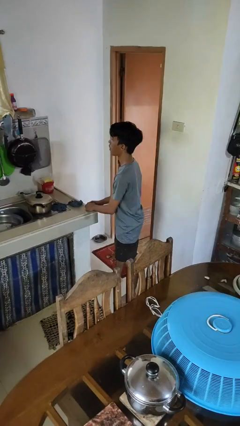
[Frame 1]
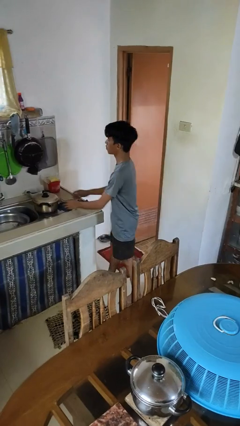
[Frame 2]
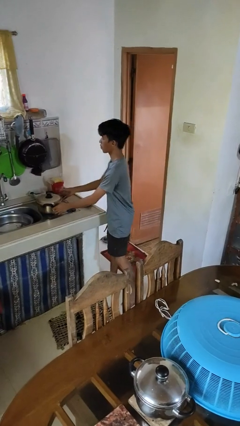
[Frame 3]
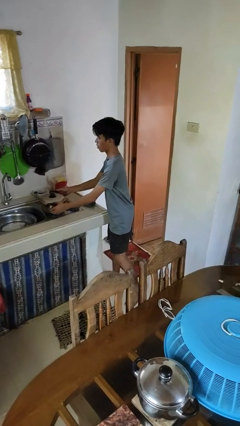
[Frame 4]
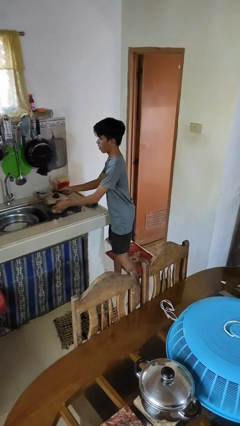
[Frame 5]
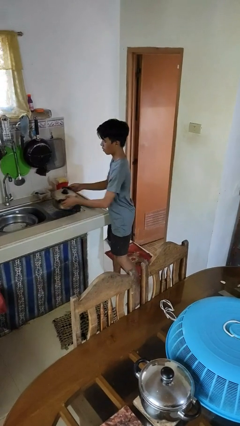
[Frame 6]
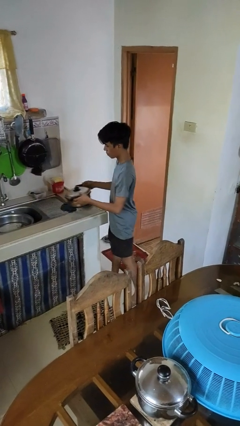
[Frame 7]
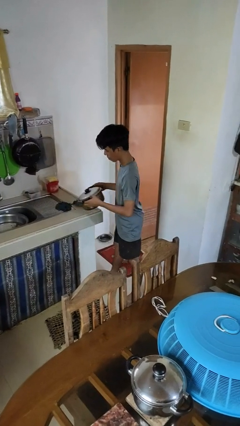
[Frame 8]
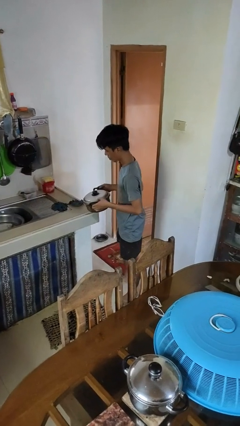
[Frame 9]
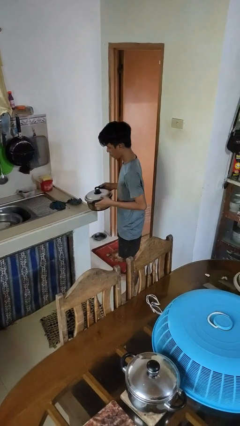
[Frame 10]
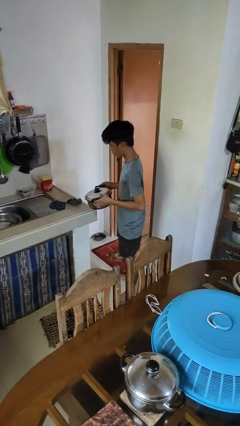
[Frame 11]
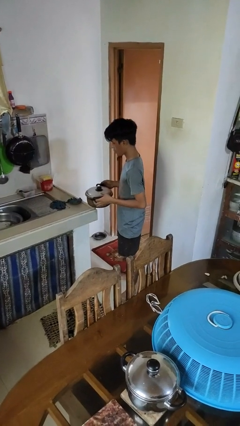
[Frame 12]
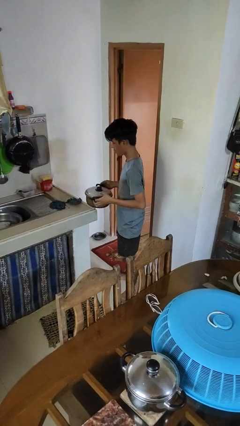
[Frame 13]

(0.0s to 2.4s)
person picks up object from countertop

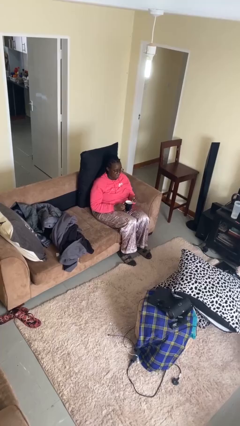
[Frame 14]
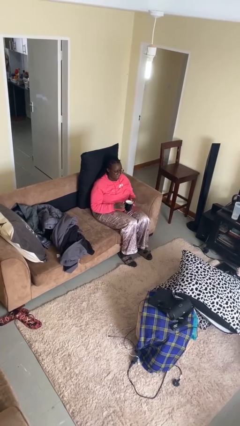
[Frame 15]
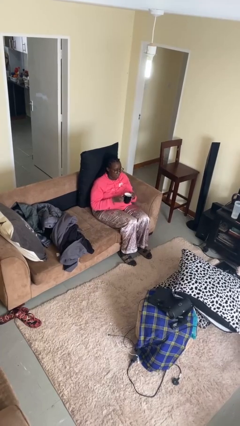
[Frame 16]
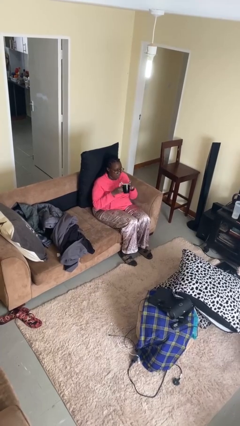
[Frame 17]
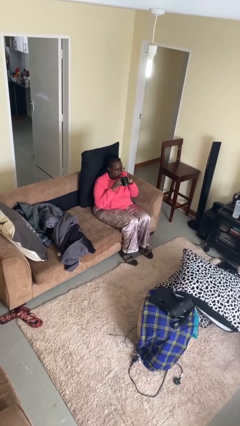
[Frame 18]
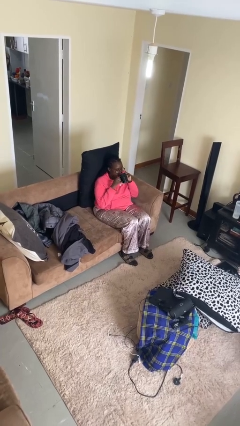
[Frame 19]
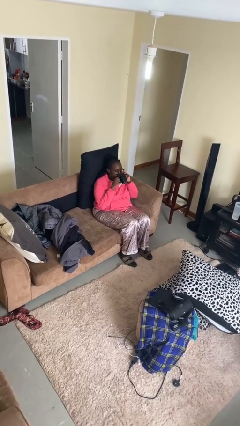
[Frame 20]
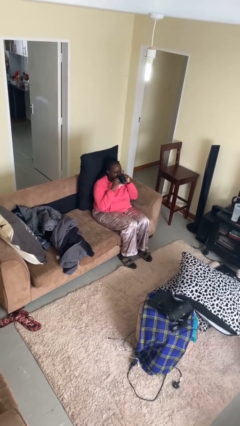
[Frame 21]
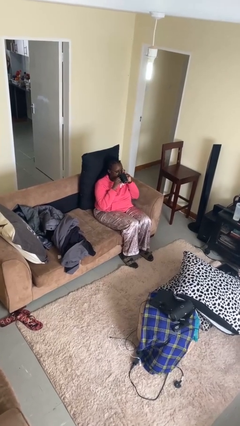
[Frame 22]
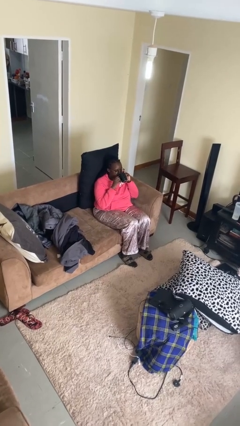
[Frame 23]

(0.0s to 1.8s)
person drinks from mug

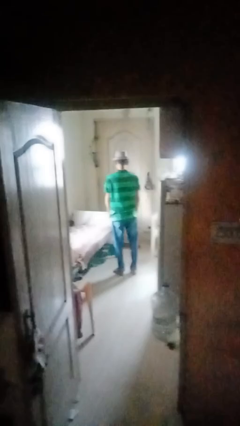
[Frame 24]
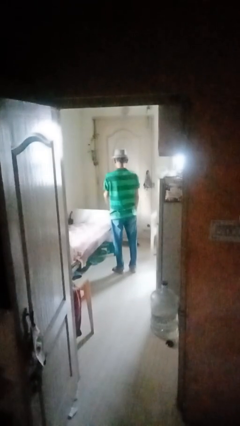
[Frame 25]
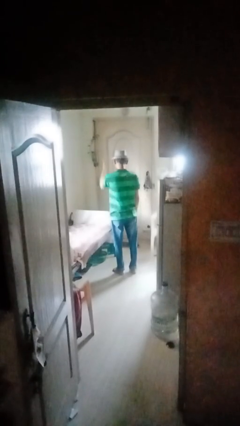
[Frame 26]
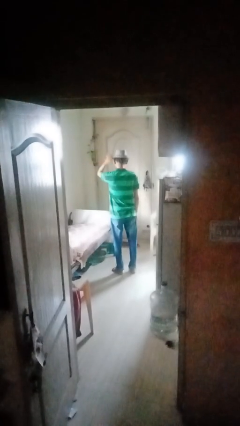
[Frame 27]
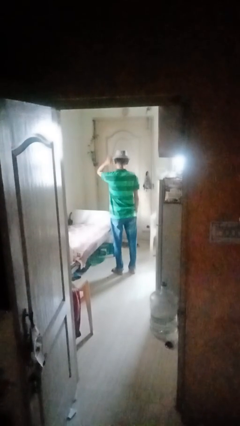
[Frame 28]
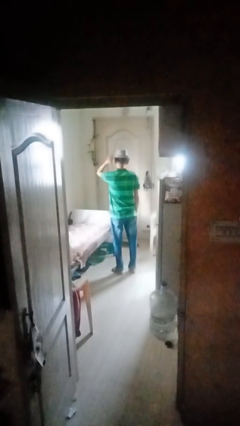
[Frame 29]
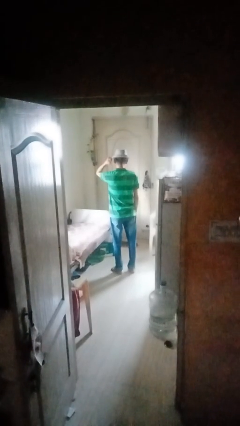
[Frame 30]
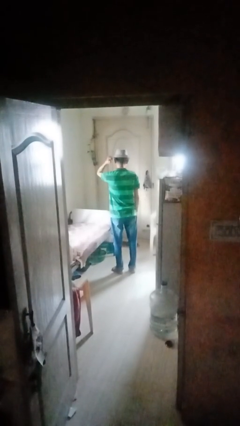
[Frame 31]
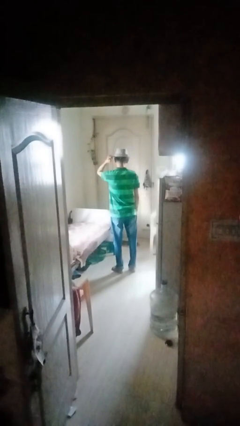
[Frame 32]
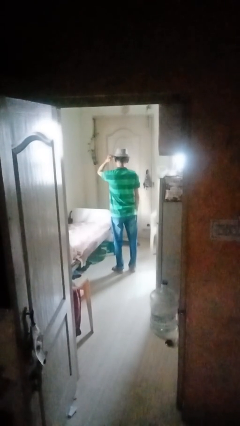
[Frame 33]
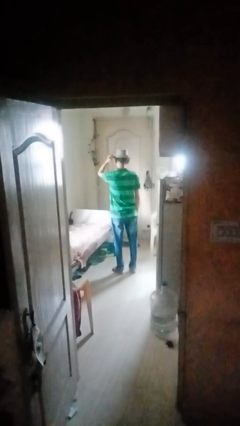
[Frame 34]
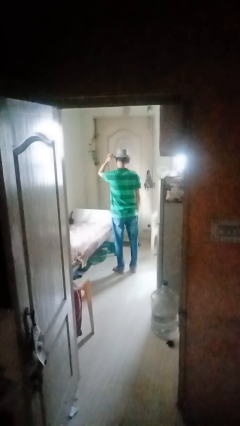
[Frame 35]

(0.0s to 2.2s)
person gestures behind me

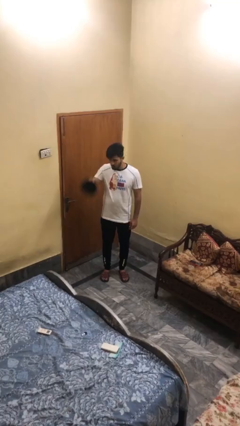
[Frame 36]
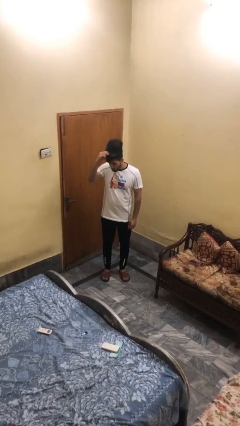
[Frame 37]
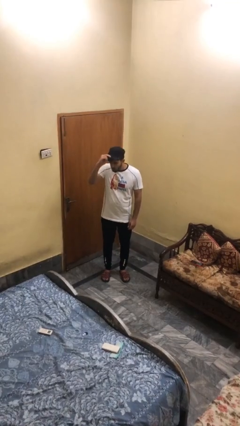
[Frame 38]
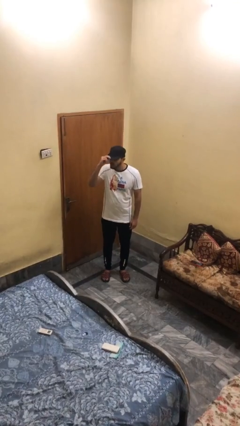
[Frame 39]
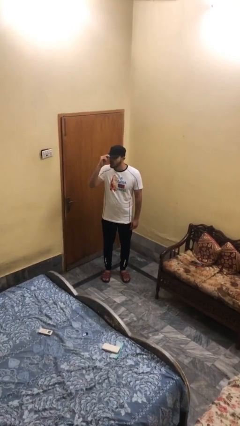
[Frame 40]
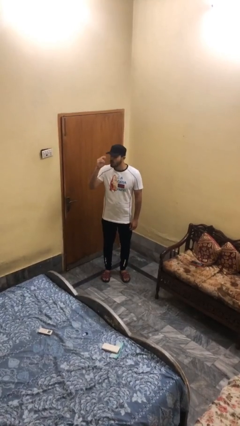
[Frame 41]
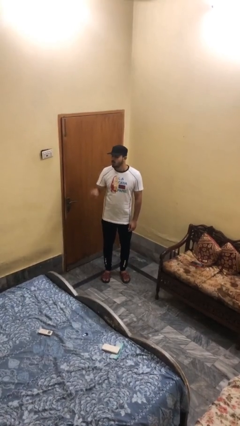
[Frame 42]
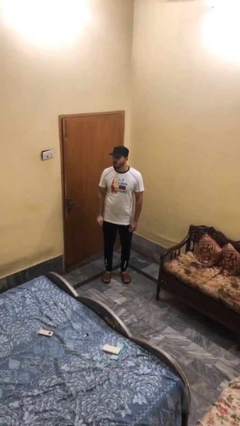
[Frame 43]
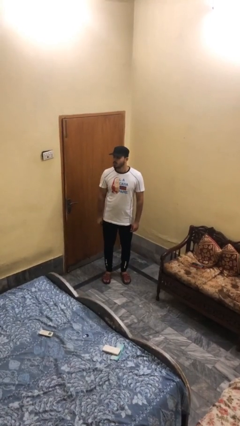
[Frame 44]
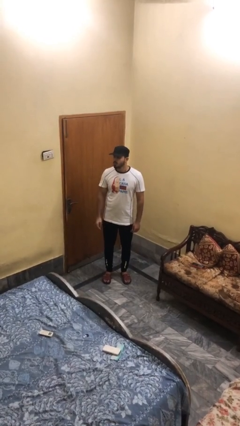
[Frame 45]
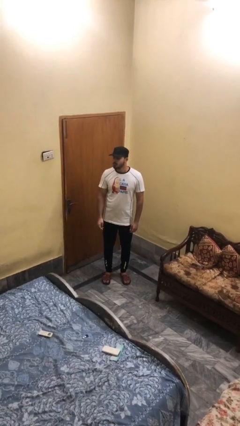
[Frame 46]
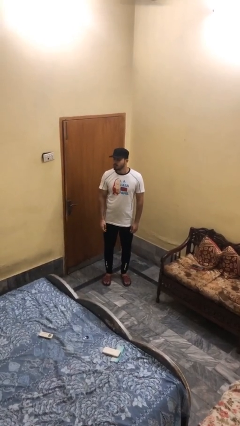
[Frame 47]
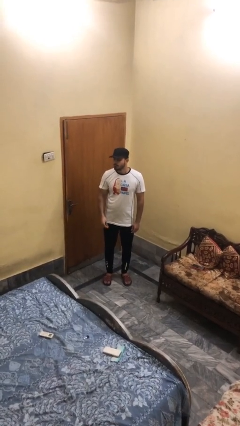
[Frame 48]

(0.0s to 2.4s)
person puts on hat

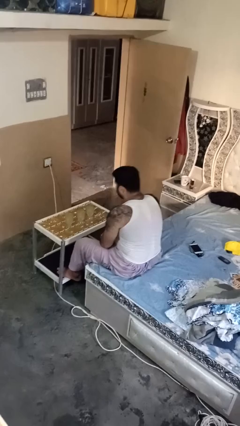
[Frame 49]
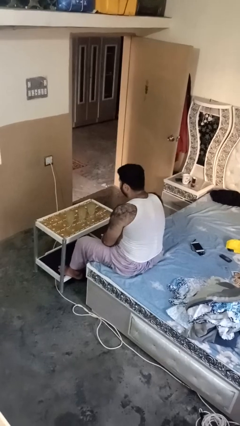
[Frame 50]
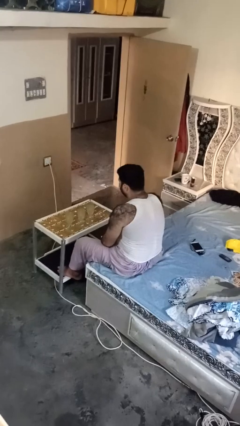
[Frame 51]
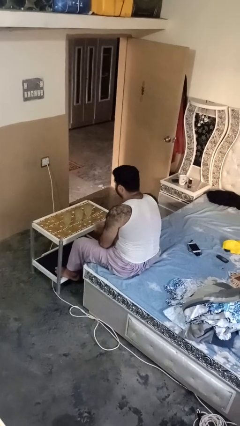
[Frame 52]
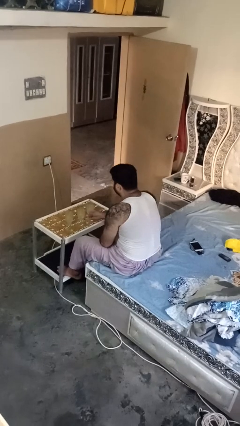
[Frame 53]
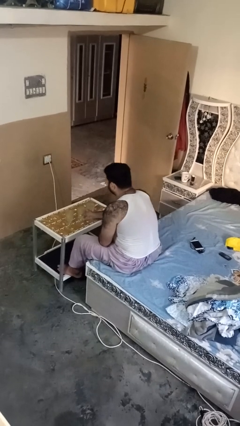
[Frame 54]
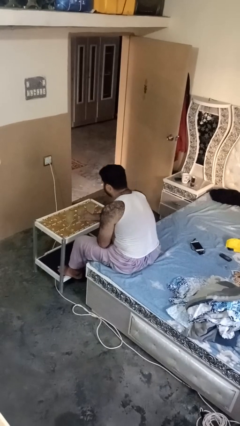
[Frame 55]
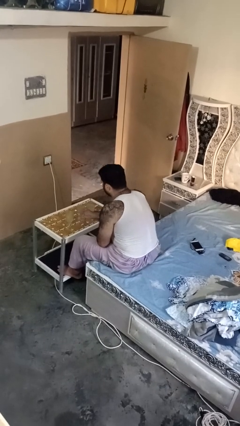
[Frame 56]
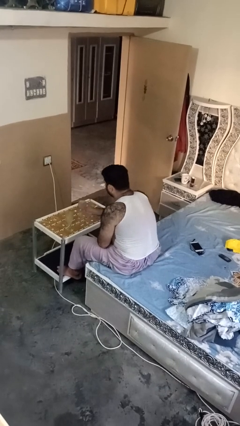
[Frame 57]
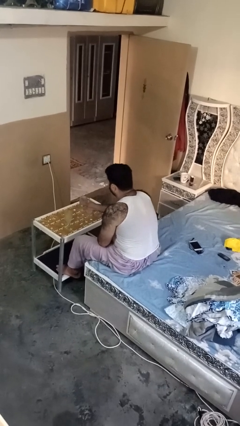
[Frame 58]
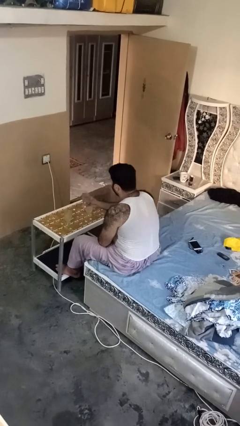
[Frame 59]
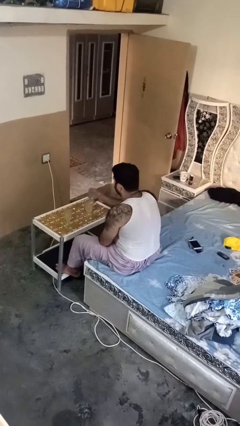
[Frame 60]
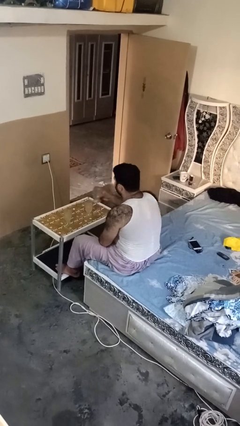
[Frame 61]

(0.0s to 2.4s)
person picks up object from table

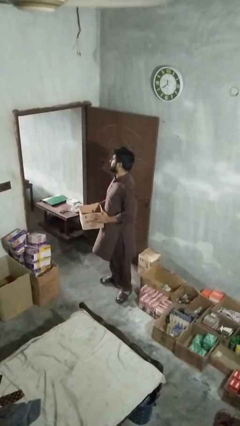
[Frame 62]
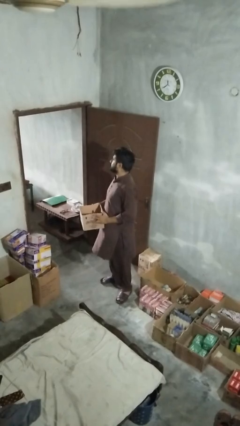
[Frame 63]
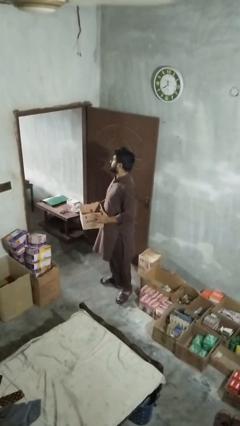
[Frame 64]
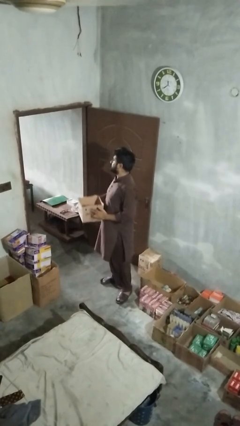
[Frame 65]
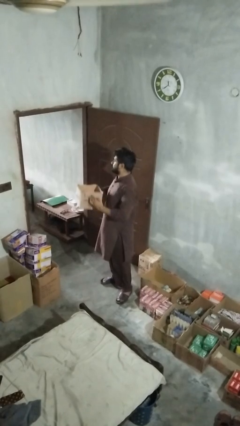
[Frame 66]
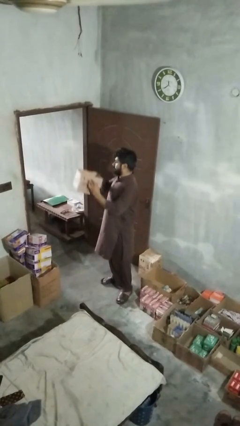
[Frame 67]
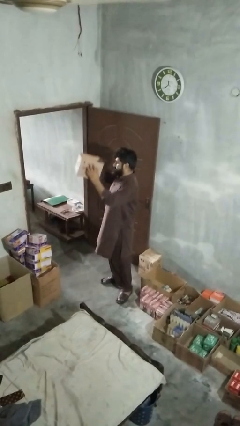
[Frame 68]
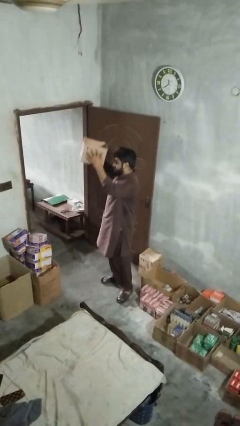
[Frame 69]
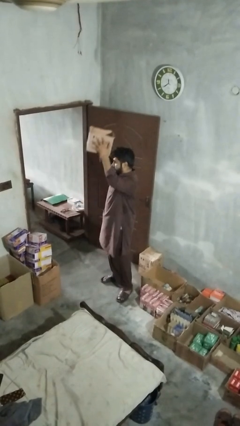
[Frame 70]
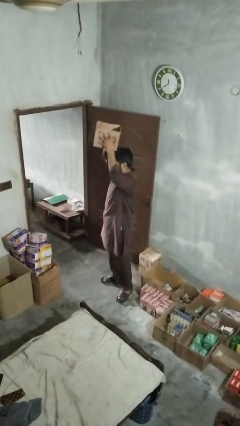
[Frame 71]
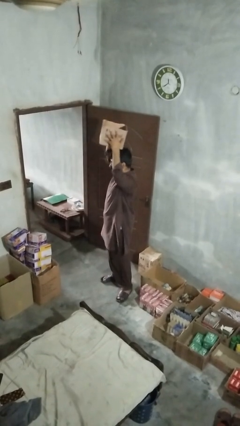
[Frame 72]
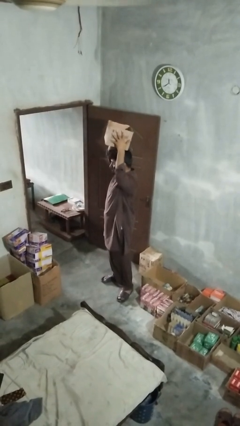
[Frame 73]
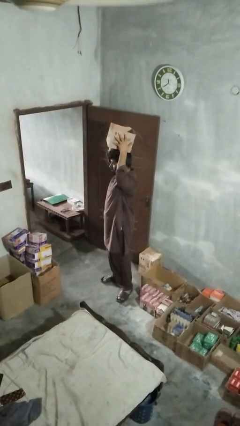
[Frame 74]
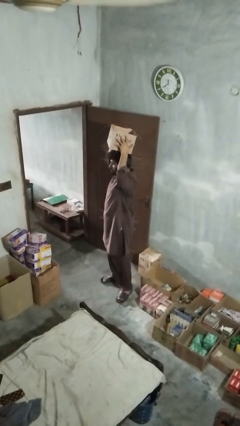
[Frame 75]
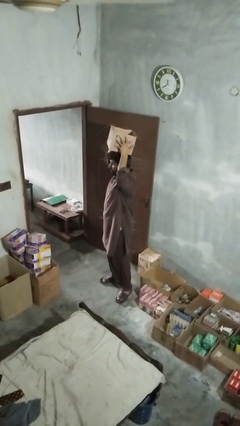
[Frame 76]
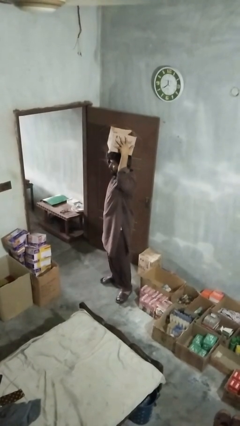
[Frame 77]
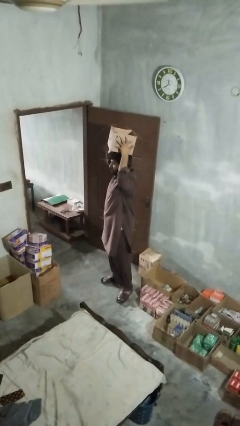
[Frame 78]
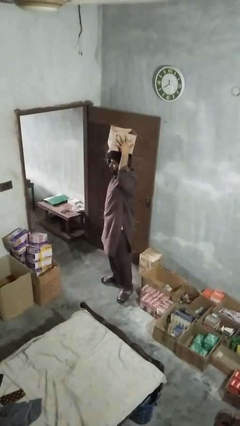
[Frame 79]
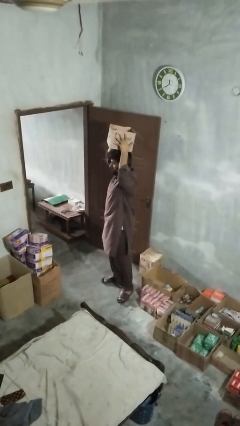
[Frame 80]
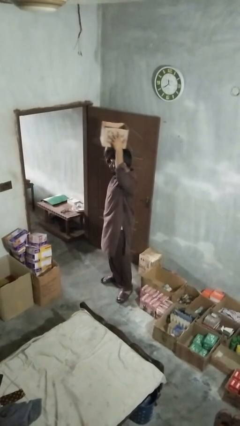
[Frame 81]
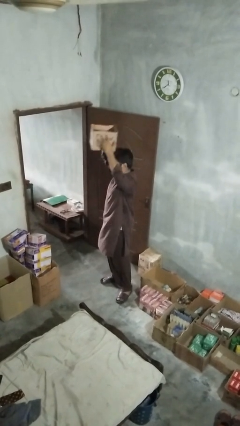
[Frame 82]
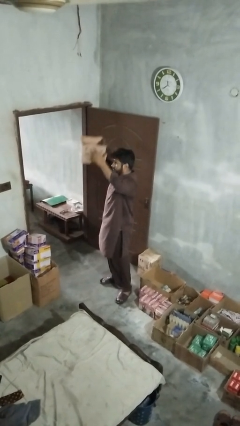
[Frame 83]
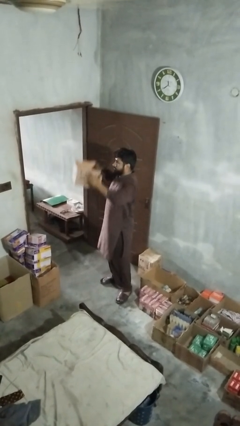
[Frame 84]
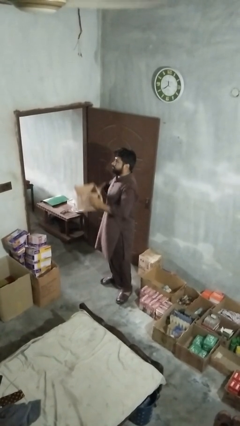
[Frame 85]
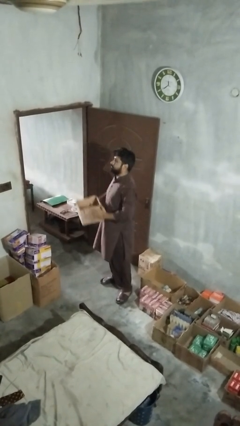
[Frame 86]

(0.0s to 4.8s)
person holds object above head

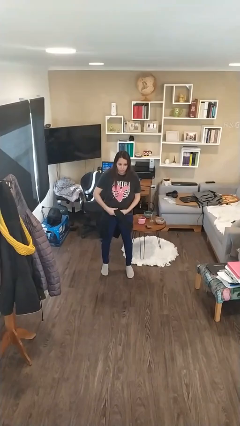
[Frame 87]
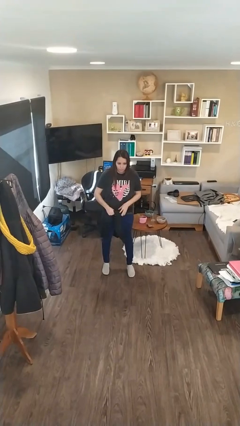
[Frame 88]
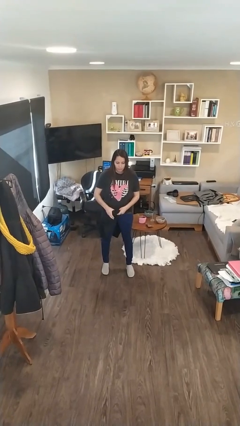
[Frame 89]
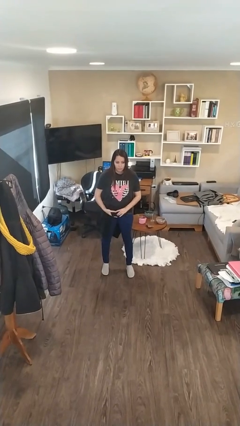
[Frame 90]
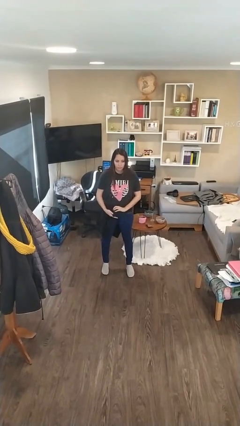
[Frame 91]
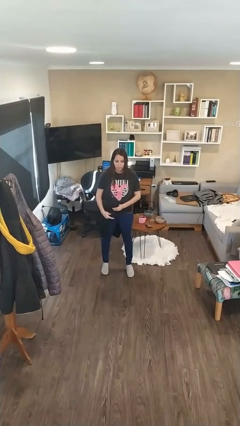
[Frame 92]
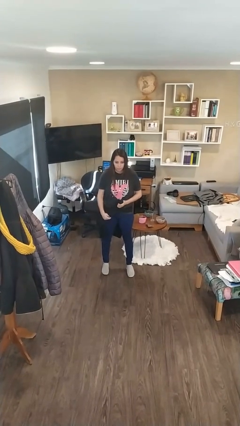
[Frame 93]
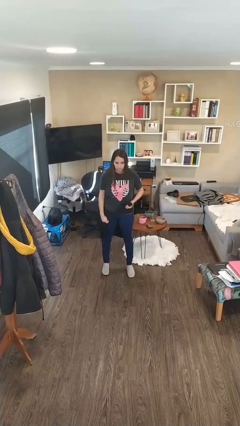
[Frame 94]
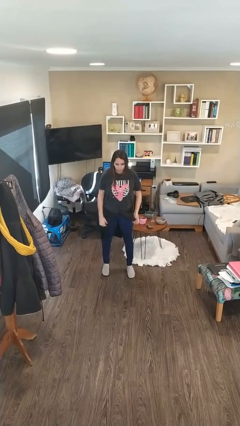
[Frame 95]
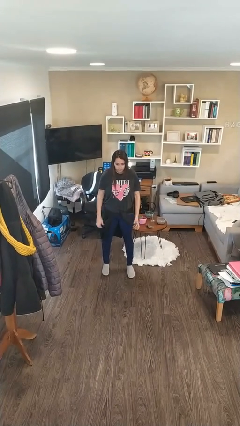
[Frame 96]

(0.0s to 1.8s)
person ties jacket around waist
